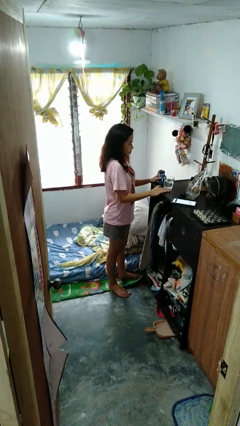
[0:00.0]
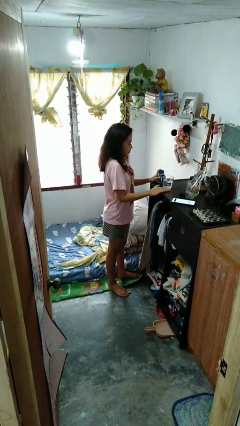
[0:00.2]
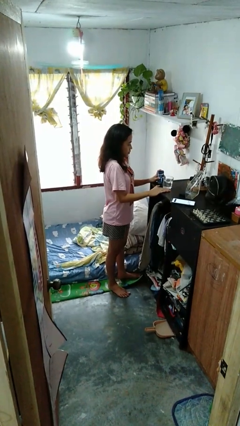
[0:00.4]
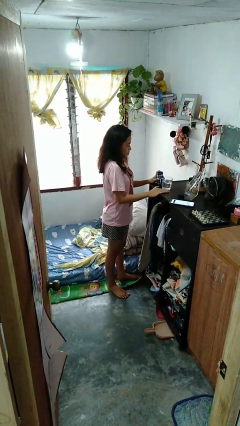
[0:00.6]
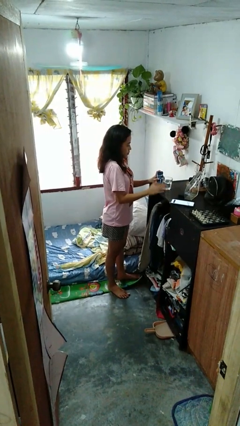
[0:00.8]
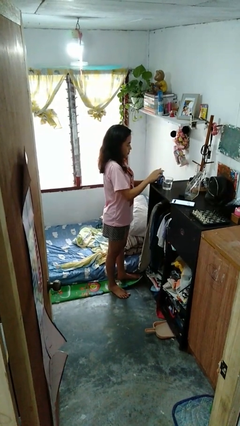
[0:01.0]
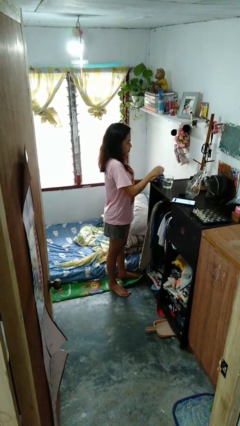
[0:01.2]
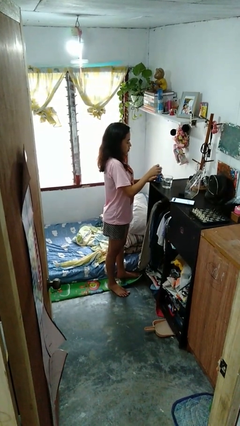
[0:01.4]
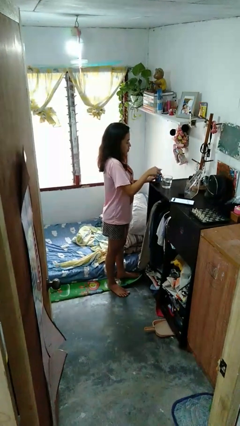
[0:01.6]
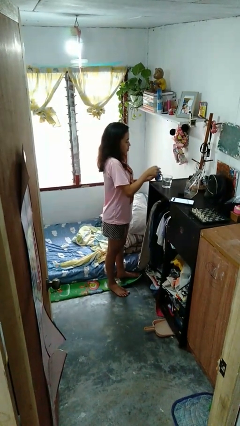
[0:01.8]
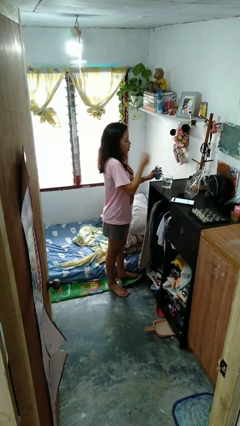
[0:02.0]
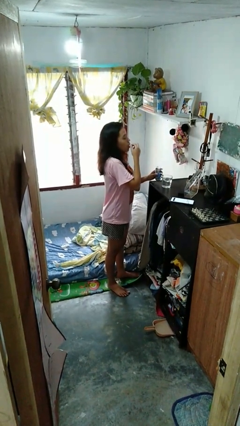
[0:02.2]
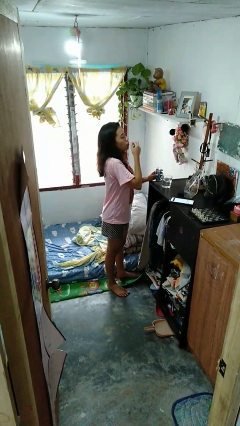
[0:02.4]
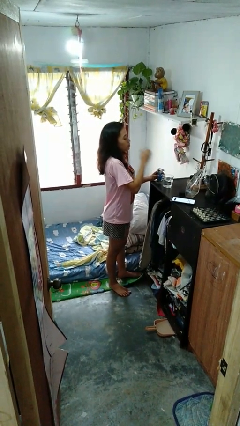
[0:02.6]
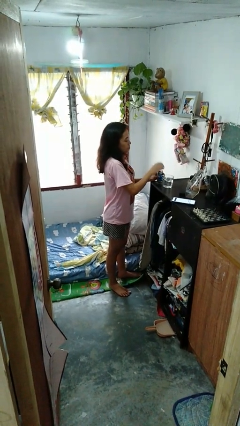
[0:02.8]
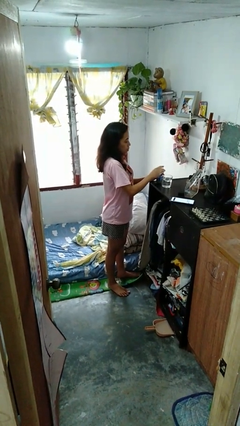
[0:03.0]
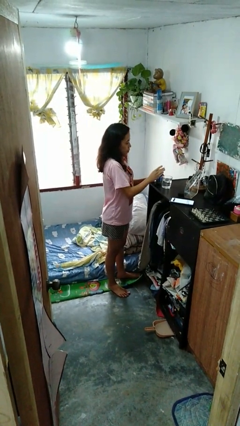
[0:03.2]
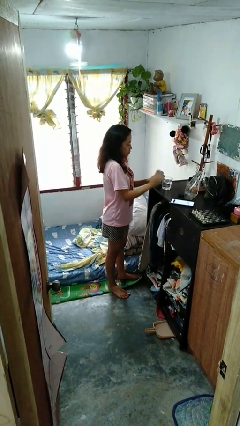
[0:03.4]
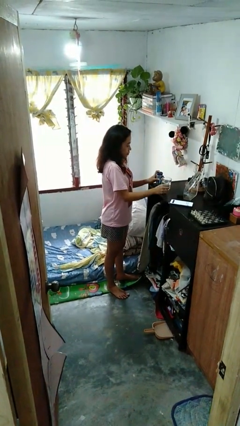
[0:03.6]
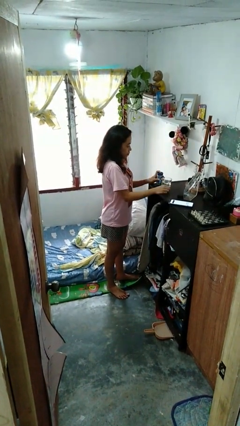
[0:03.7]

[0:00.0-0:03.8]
person takes medicine pills

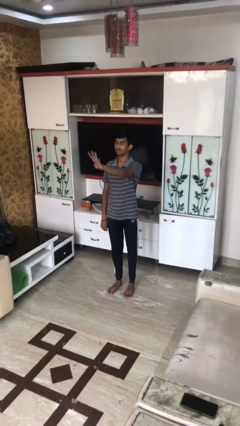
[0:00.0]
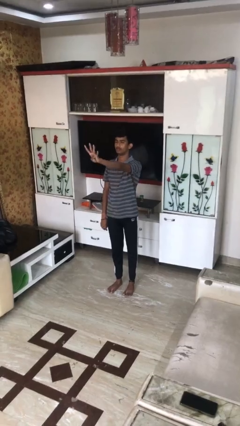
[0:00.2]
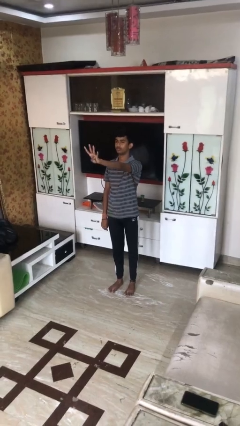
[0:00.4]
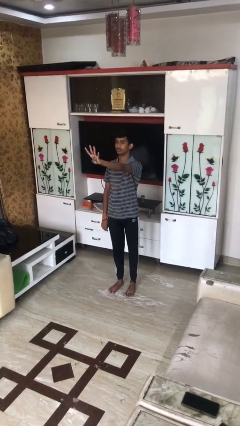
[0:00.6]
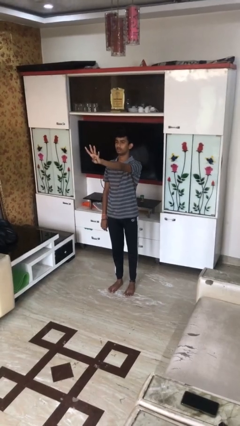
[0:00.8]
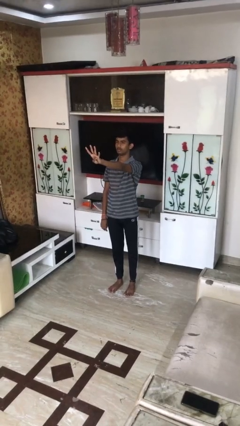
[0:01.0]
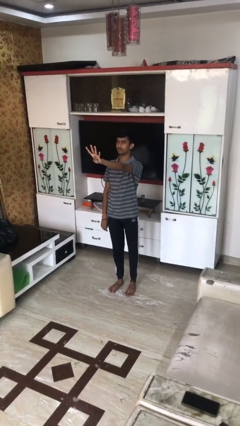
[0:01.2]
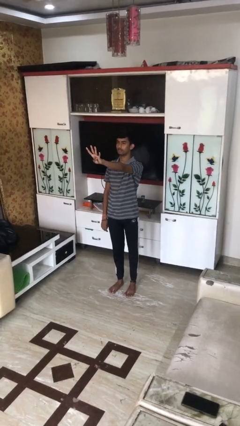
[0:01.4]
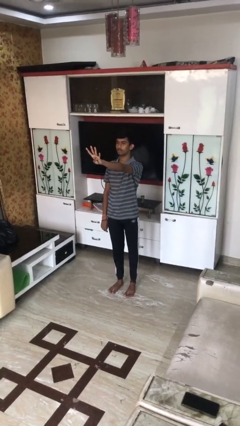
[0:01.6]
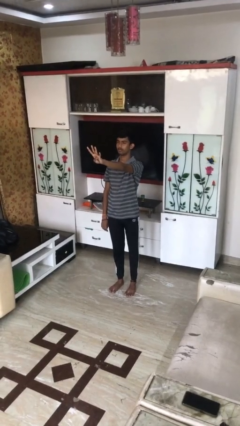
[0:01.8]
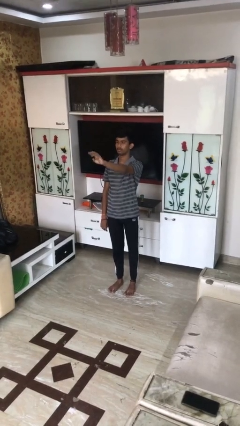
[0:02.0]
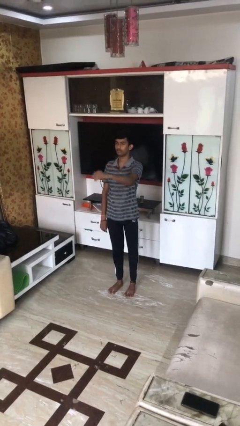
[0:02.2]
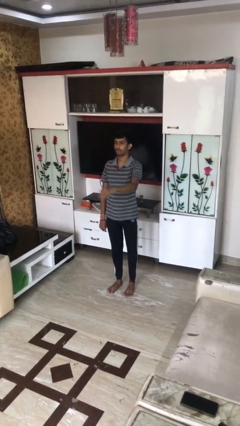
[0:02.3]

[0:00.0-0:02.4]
person gestures number four

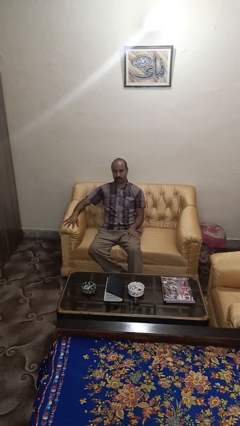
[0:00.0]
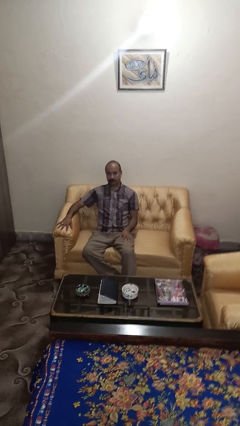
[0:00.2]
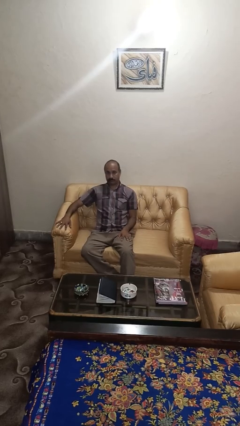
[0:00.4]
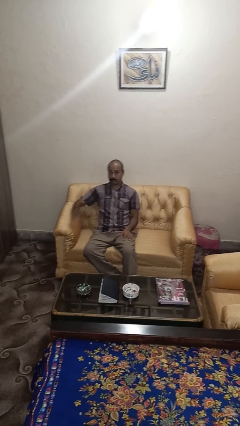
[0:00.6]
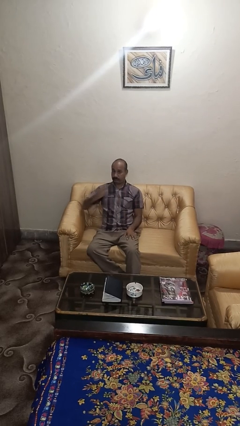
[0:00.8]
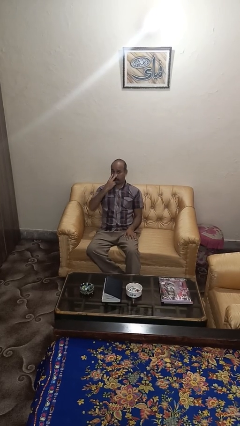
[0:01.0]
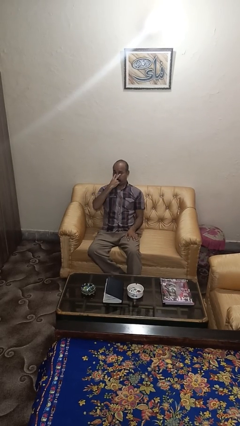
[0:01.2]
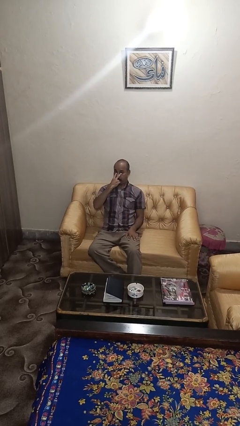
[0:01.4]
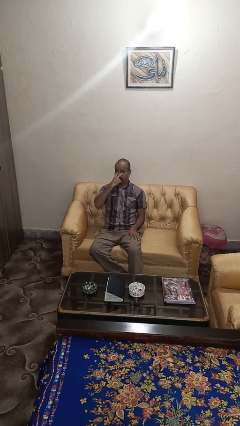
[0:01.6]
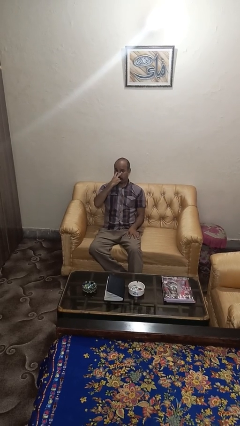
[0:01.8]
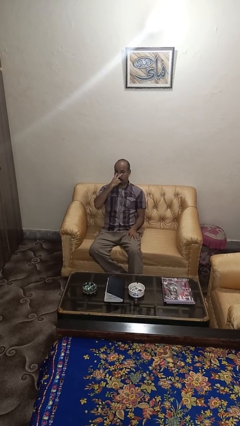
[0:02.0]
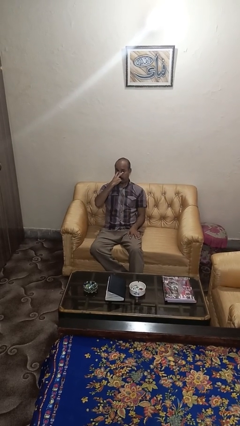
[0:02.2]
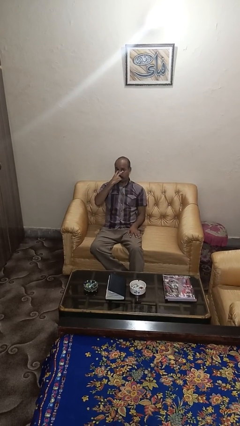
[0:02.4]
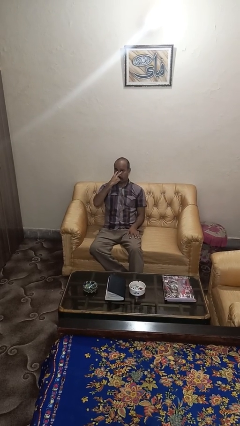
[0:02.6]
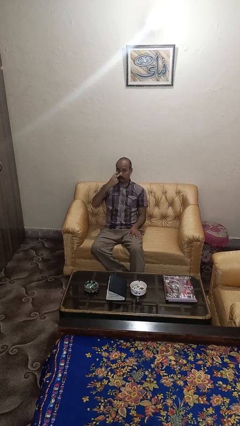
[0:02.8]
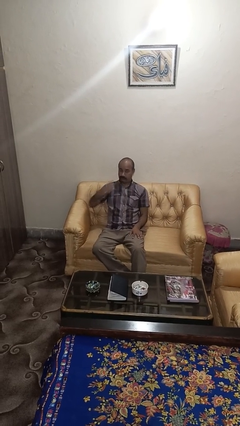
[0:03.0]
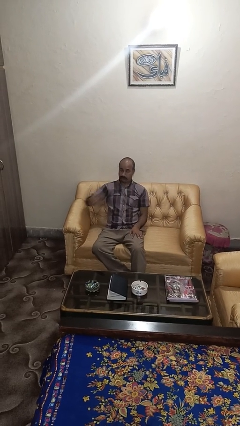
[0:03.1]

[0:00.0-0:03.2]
person gestures watch closely

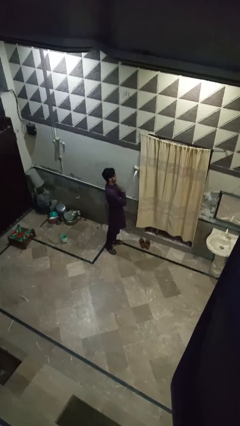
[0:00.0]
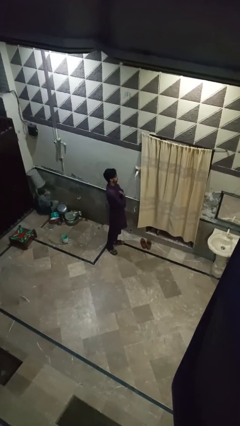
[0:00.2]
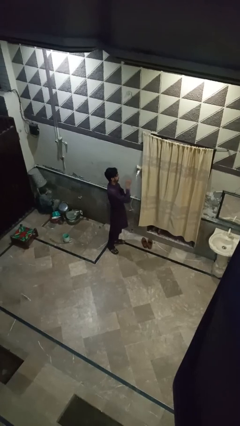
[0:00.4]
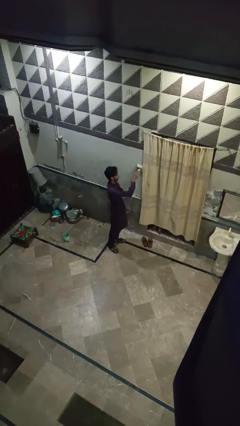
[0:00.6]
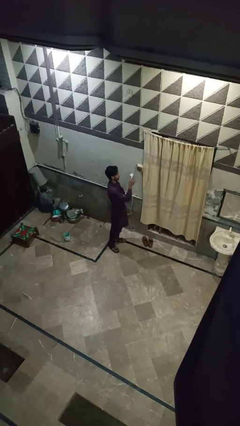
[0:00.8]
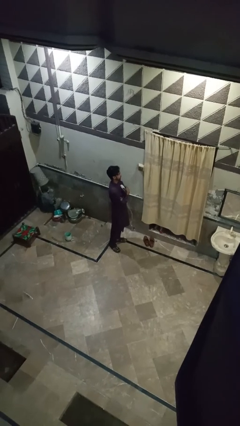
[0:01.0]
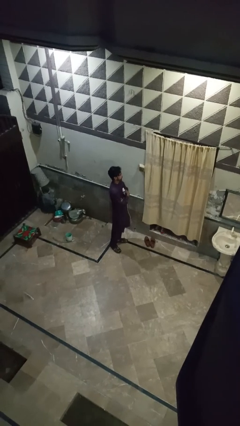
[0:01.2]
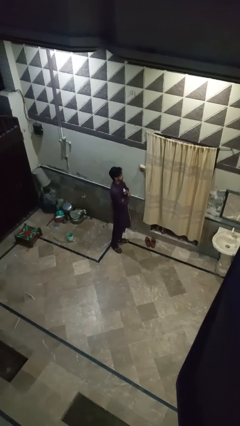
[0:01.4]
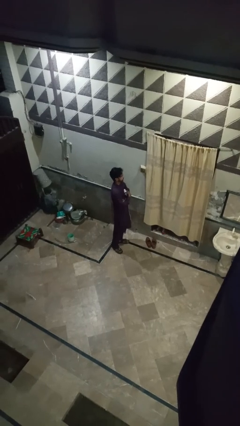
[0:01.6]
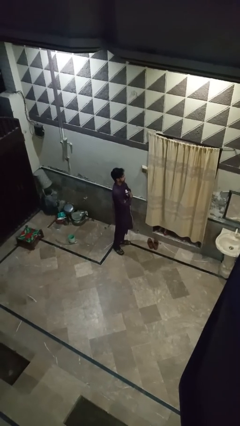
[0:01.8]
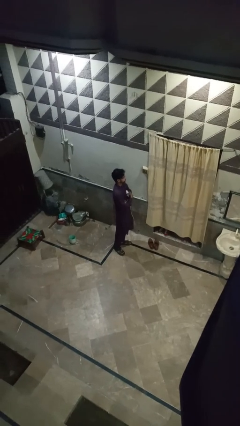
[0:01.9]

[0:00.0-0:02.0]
person unplugs from electrical socket

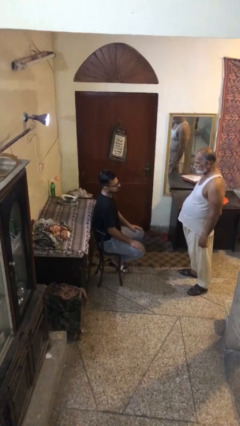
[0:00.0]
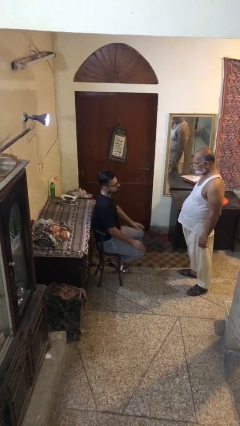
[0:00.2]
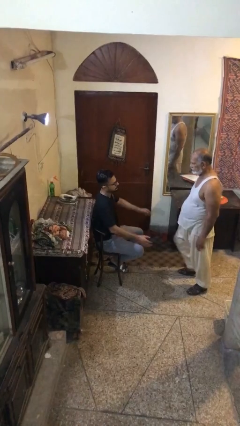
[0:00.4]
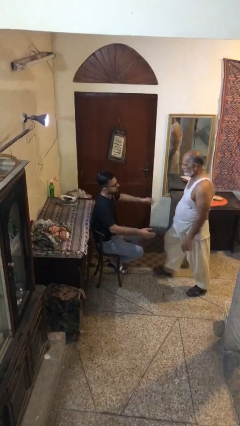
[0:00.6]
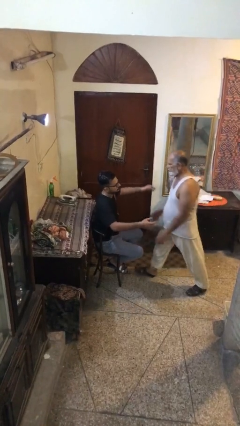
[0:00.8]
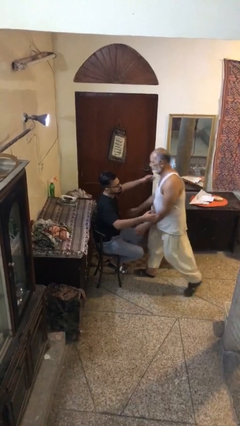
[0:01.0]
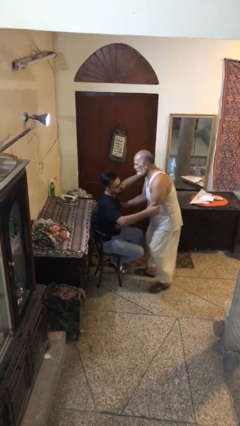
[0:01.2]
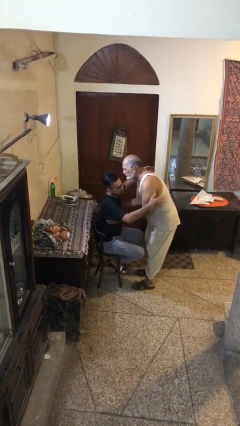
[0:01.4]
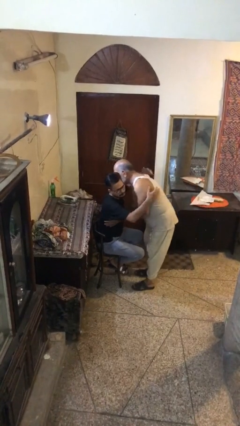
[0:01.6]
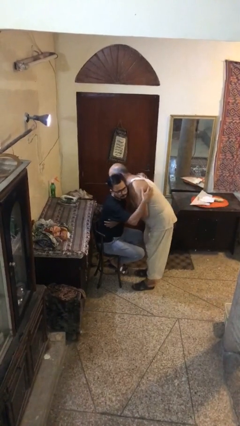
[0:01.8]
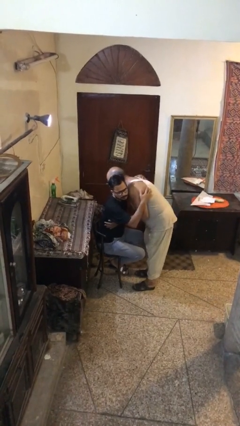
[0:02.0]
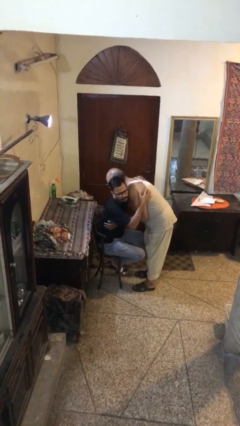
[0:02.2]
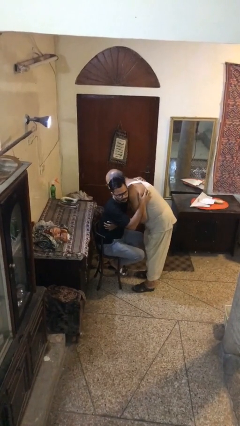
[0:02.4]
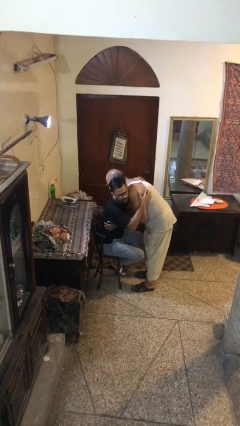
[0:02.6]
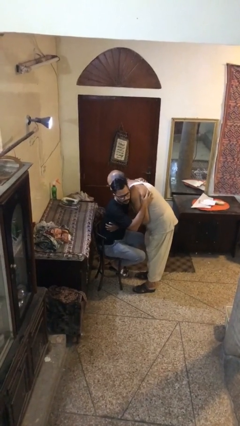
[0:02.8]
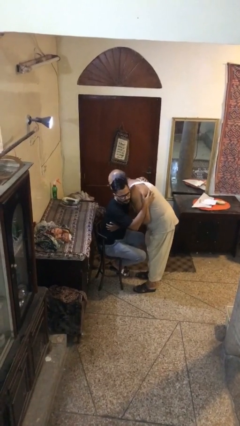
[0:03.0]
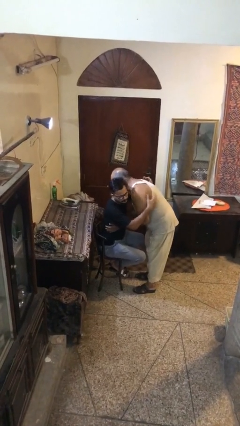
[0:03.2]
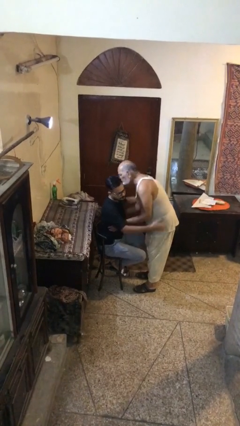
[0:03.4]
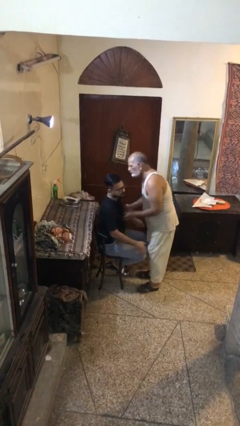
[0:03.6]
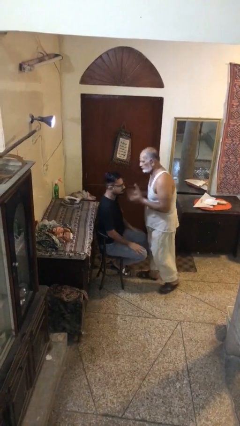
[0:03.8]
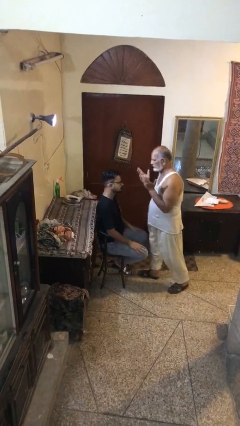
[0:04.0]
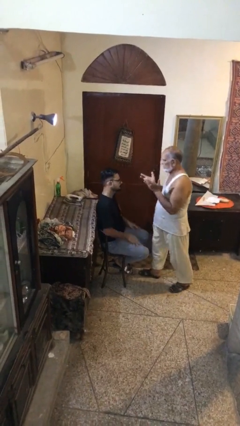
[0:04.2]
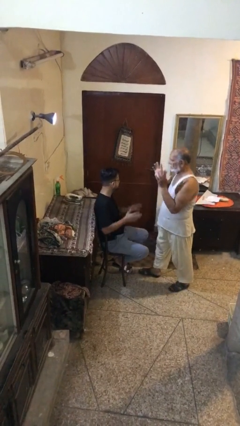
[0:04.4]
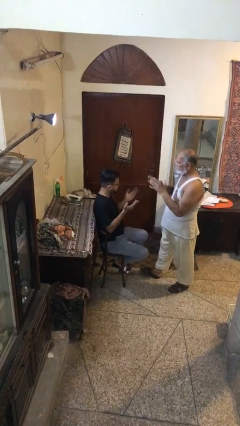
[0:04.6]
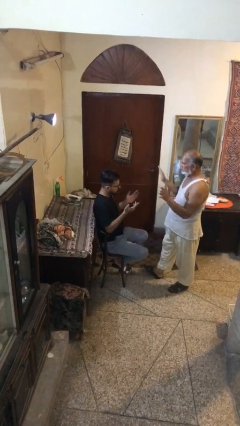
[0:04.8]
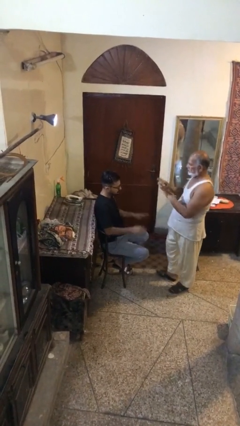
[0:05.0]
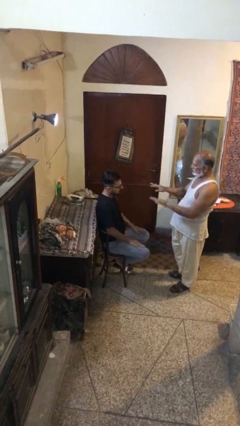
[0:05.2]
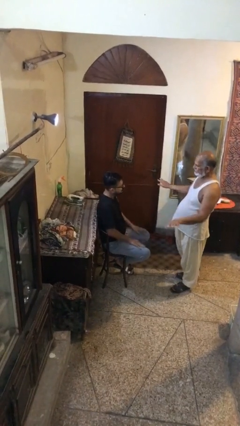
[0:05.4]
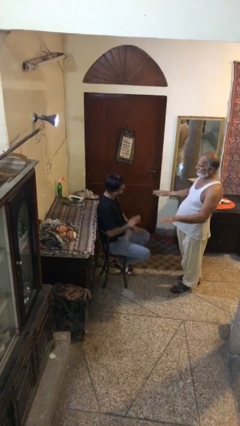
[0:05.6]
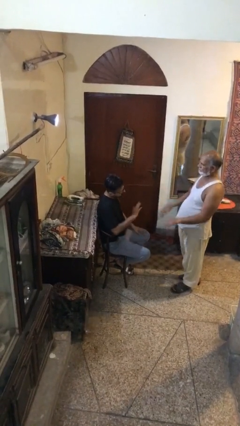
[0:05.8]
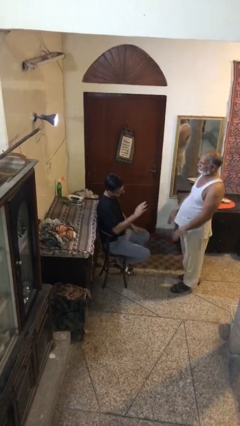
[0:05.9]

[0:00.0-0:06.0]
person embraces person

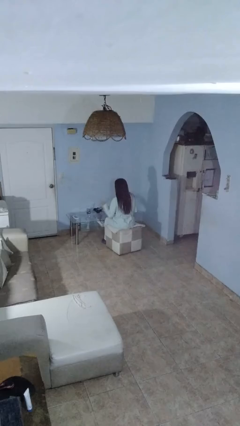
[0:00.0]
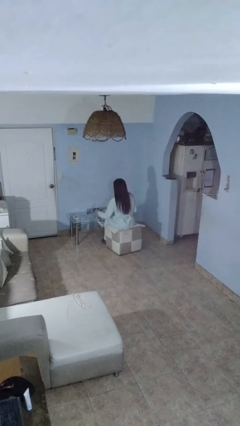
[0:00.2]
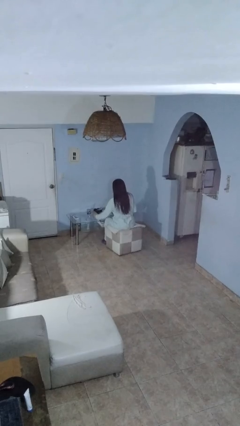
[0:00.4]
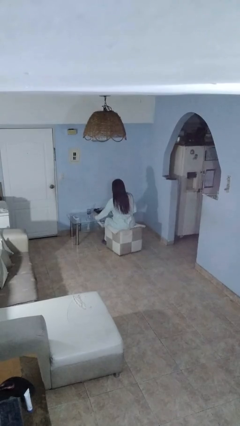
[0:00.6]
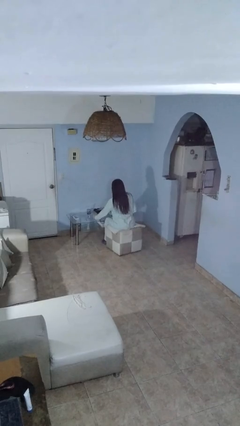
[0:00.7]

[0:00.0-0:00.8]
person puts down object on table
